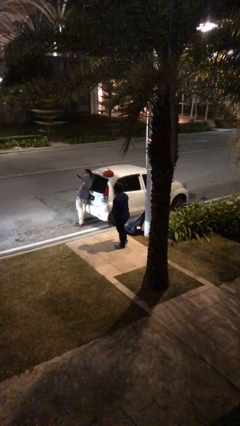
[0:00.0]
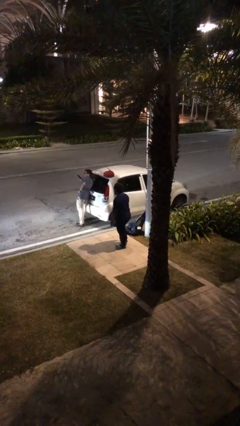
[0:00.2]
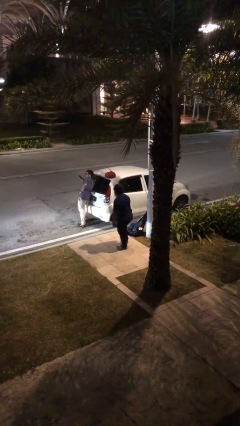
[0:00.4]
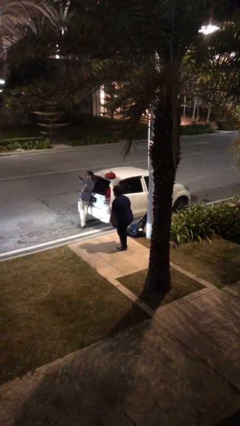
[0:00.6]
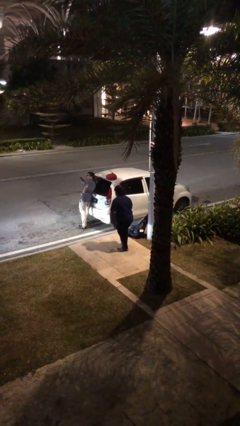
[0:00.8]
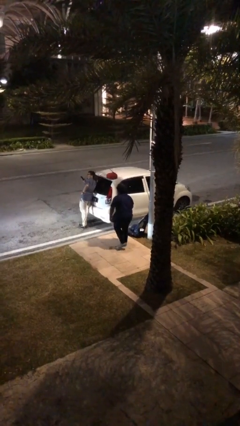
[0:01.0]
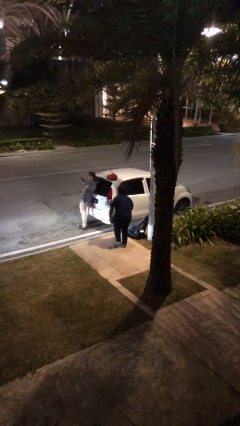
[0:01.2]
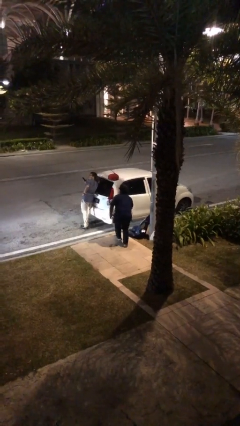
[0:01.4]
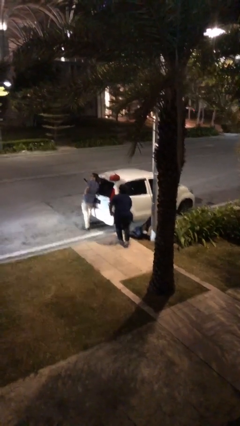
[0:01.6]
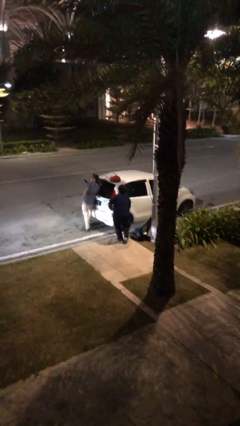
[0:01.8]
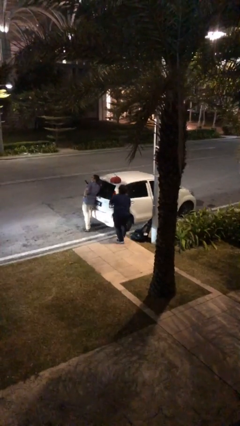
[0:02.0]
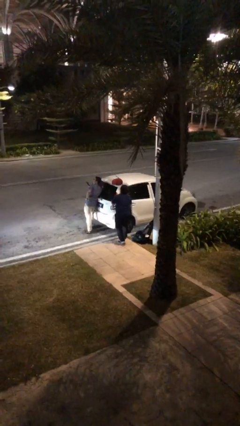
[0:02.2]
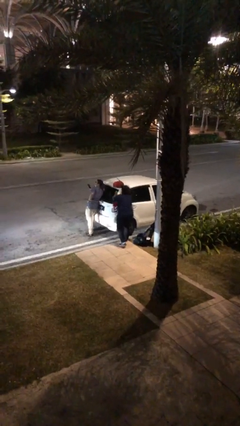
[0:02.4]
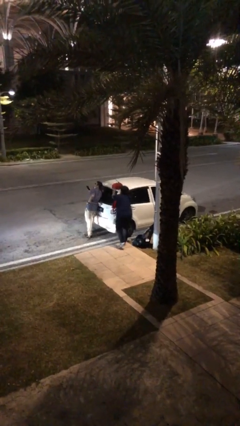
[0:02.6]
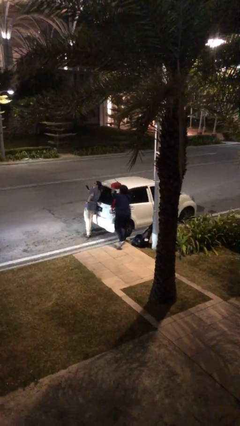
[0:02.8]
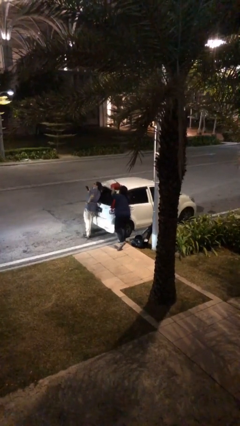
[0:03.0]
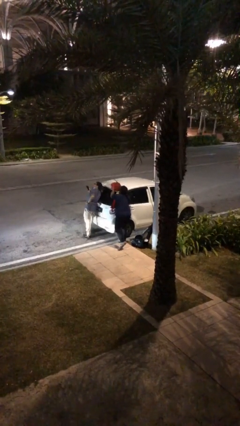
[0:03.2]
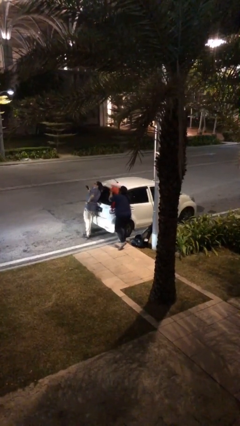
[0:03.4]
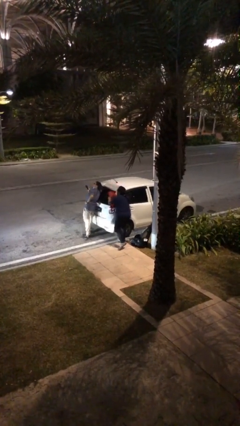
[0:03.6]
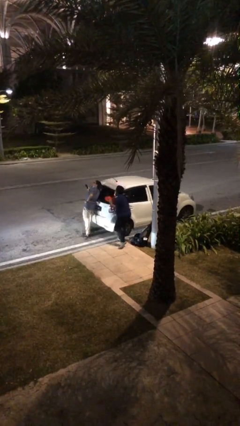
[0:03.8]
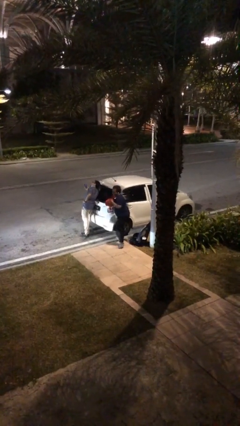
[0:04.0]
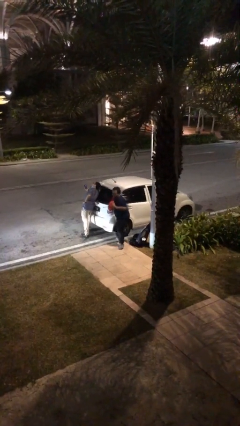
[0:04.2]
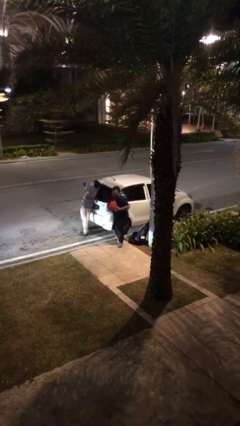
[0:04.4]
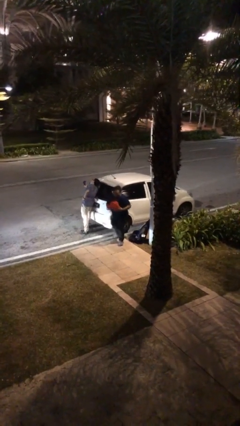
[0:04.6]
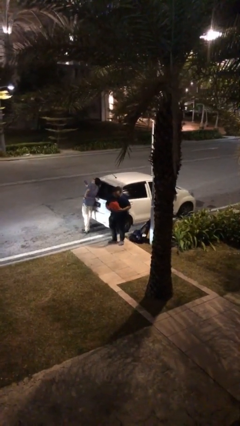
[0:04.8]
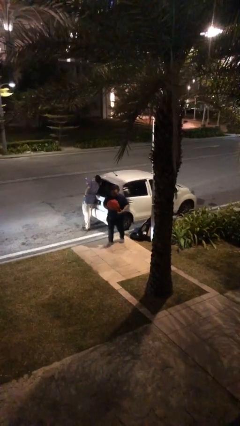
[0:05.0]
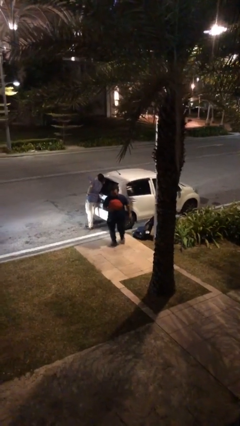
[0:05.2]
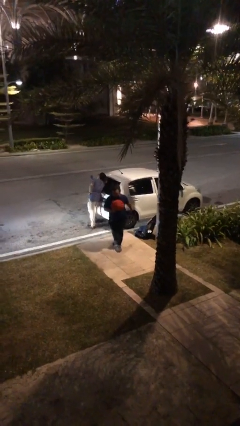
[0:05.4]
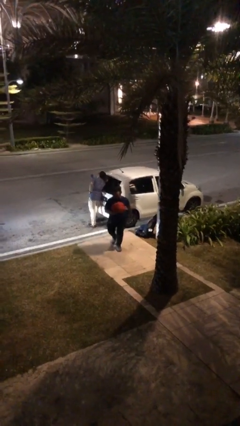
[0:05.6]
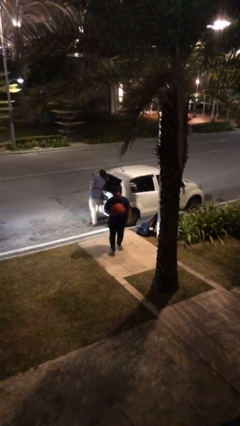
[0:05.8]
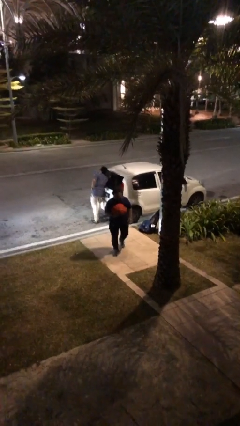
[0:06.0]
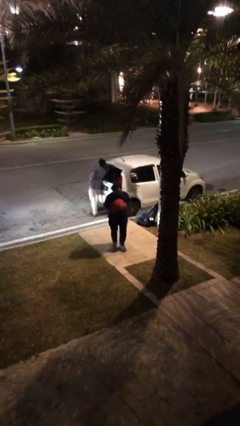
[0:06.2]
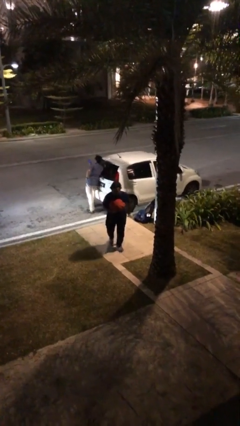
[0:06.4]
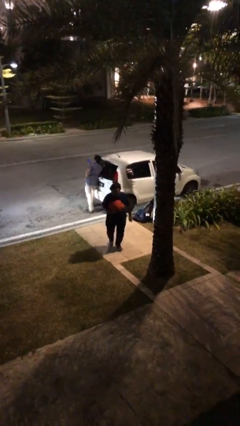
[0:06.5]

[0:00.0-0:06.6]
person steals object from person

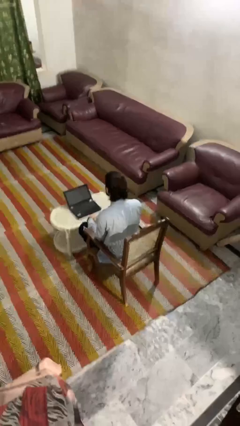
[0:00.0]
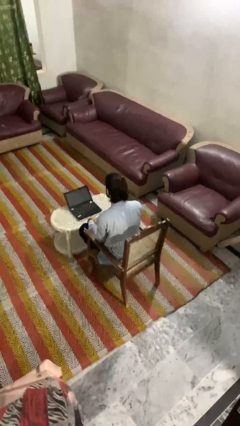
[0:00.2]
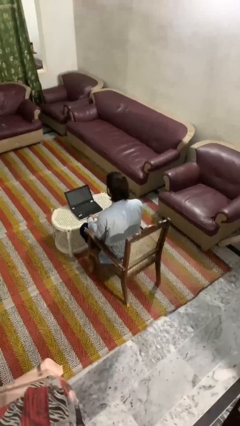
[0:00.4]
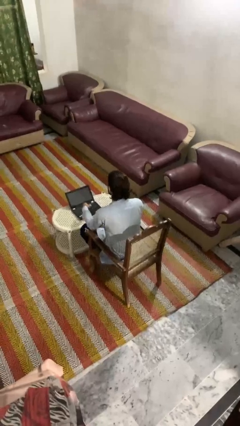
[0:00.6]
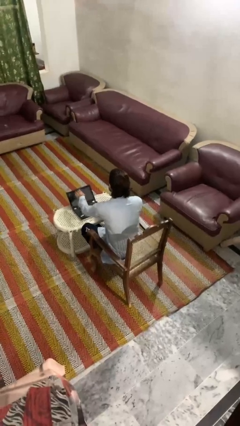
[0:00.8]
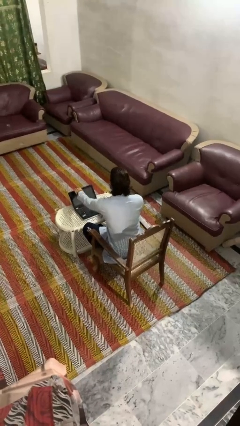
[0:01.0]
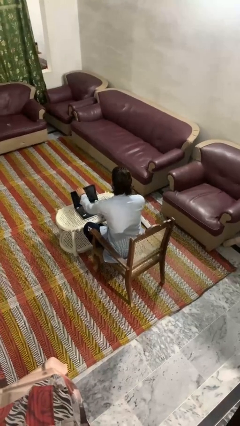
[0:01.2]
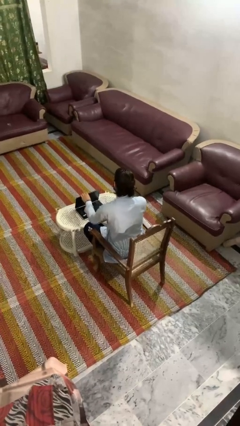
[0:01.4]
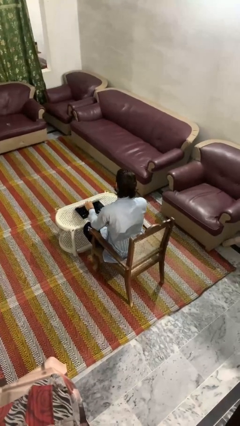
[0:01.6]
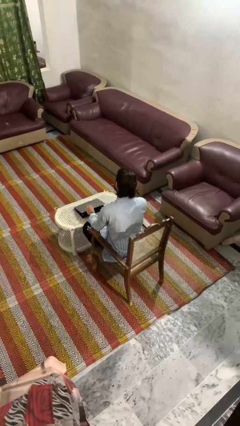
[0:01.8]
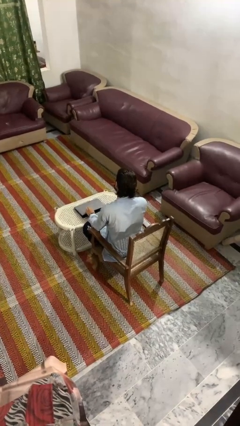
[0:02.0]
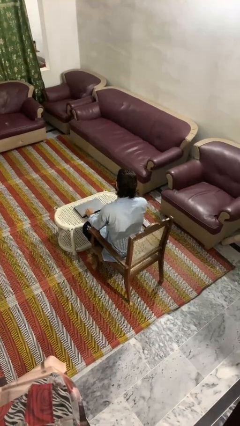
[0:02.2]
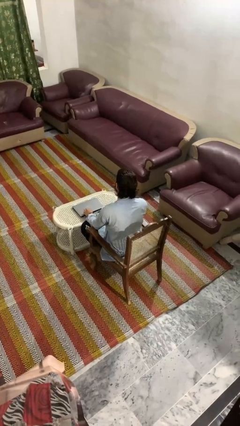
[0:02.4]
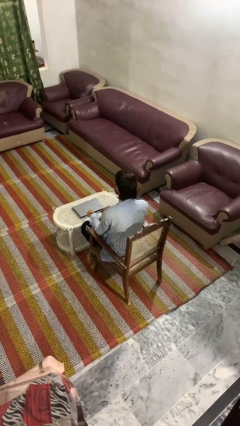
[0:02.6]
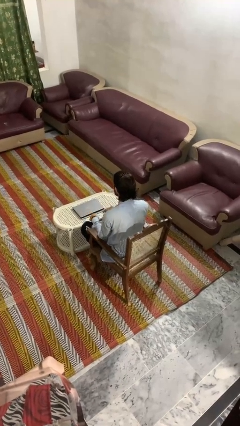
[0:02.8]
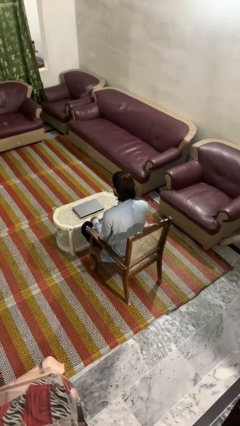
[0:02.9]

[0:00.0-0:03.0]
person closes laptop

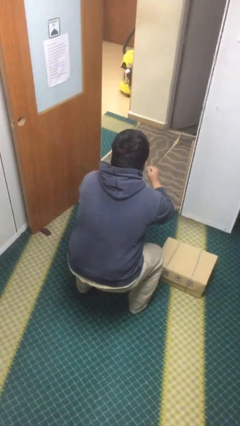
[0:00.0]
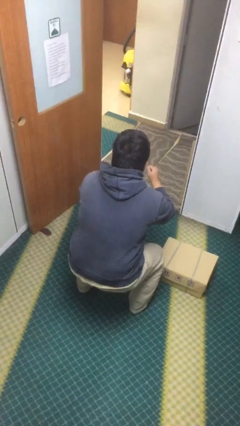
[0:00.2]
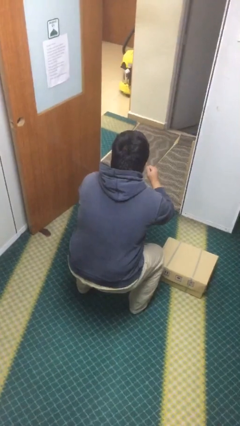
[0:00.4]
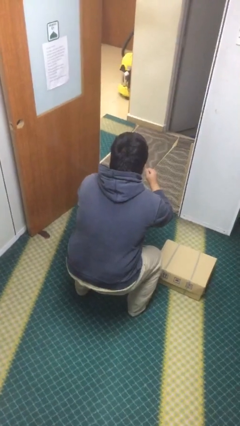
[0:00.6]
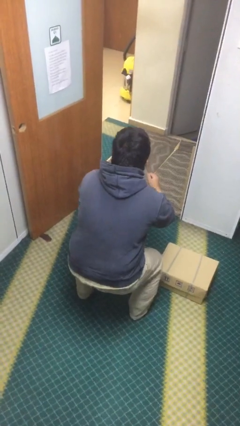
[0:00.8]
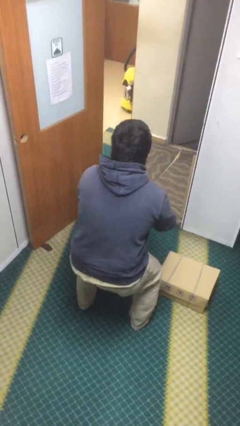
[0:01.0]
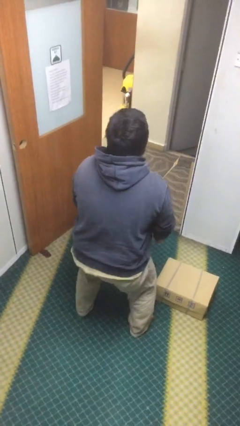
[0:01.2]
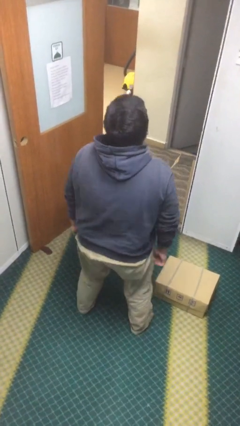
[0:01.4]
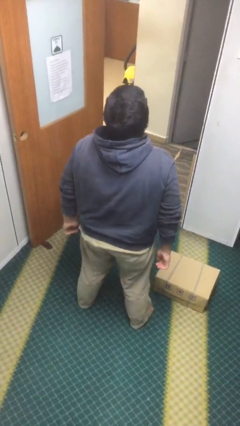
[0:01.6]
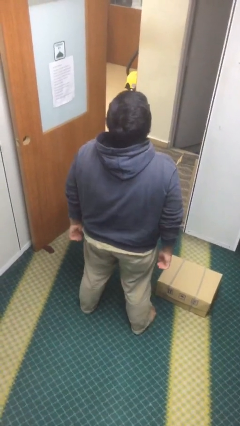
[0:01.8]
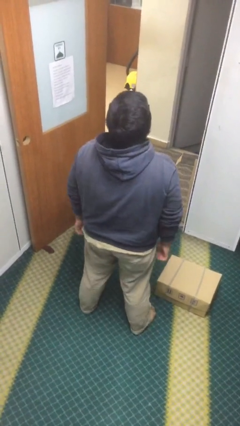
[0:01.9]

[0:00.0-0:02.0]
person stands up

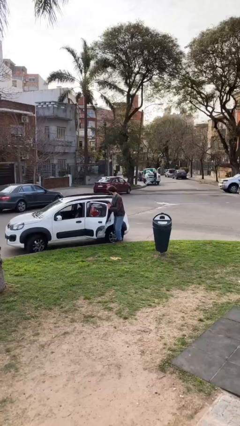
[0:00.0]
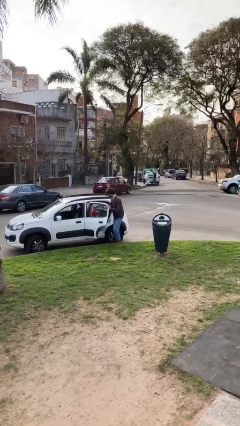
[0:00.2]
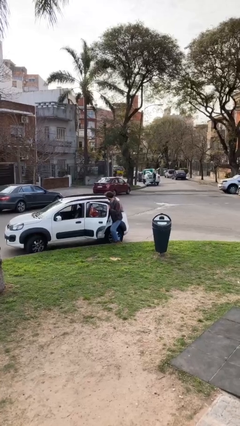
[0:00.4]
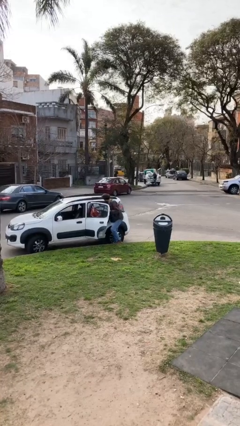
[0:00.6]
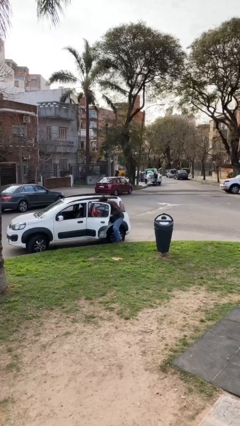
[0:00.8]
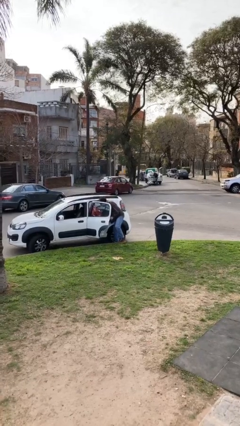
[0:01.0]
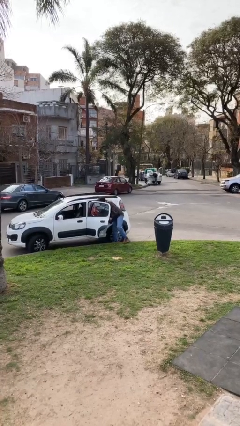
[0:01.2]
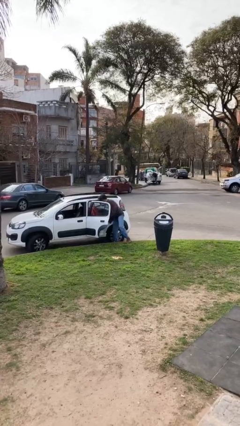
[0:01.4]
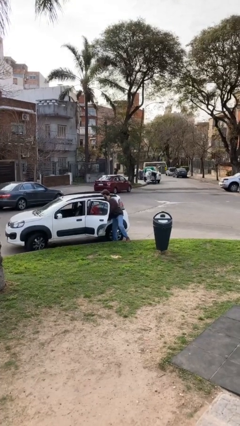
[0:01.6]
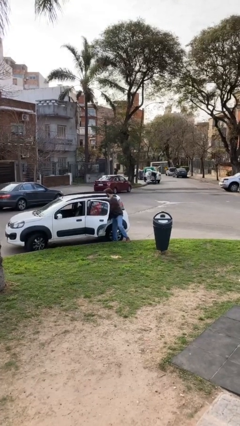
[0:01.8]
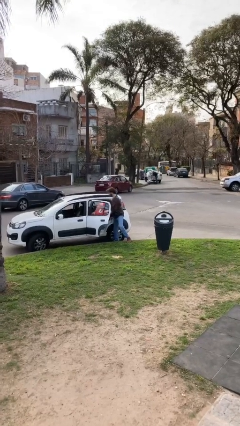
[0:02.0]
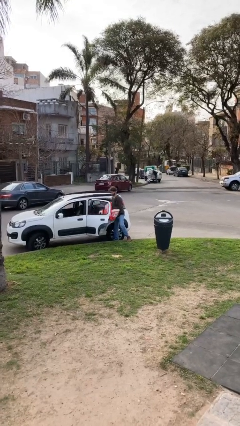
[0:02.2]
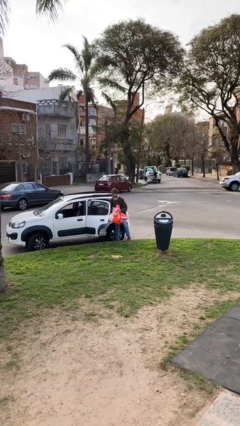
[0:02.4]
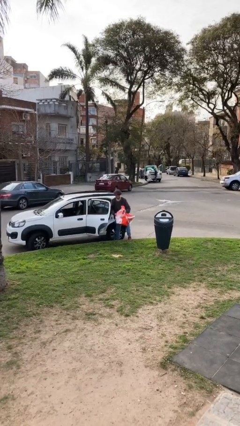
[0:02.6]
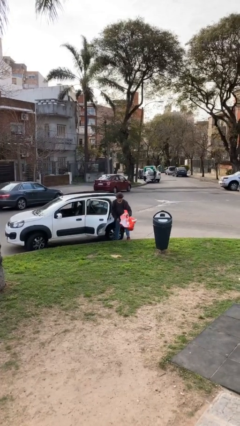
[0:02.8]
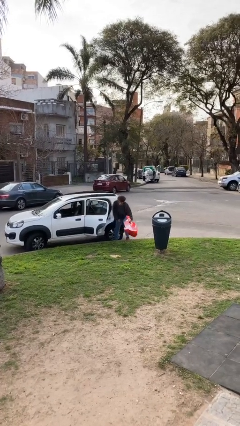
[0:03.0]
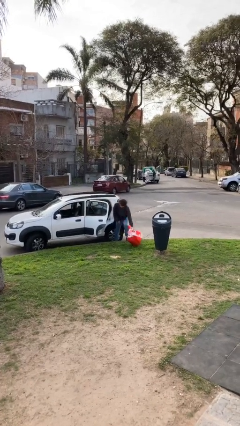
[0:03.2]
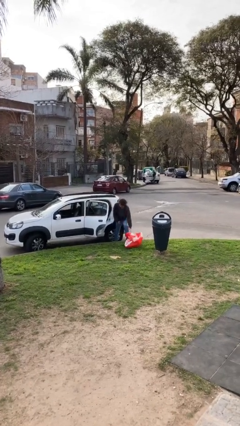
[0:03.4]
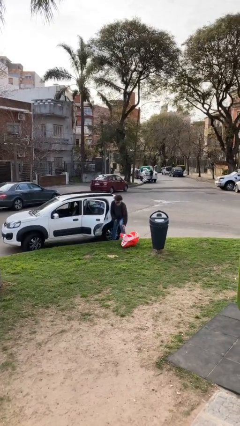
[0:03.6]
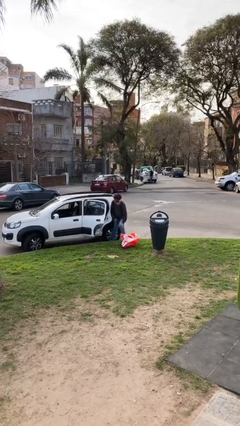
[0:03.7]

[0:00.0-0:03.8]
person unloads car

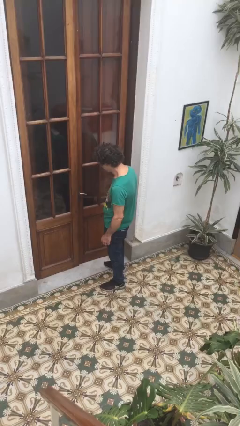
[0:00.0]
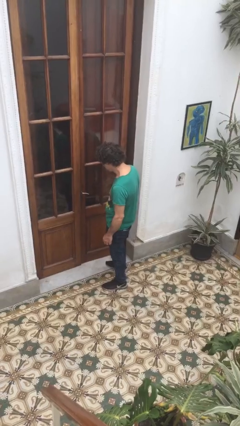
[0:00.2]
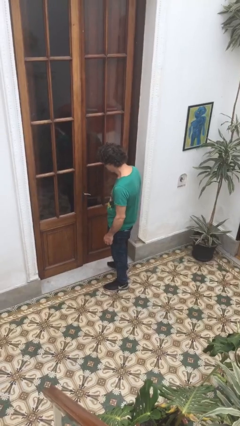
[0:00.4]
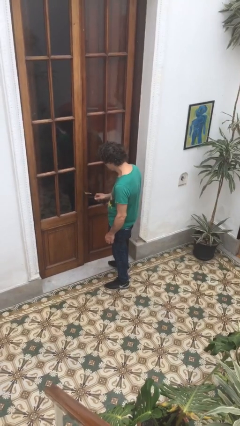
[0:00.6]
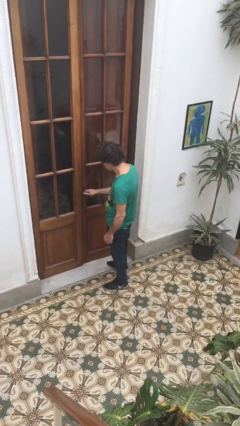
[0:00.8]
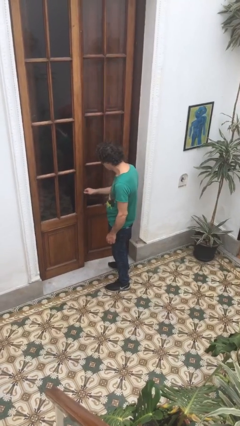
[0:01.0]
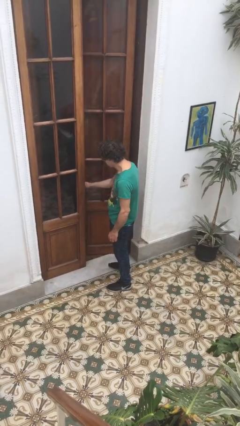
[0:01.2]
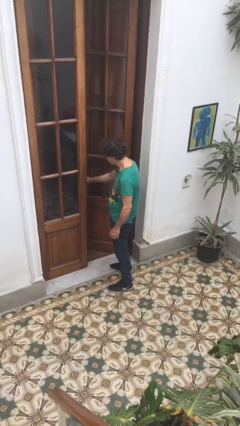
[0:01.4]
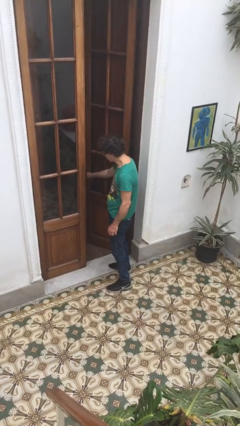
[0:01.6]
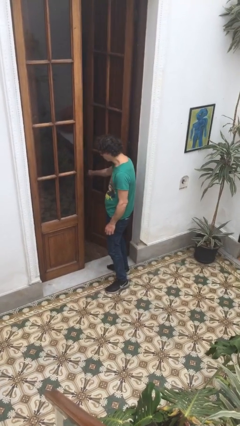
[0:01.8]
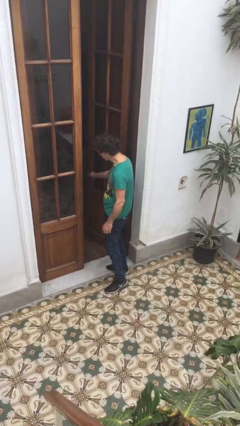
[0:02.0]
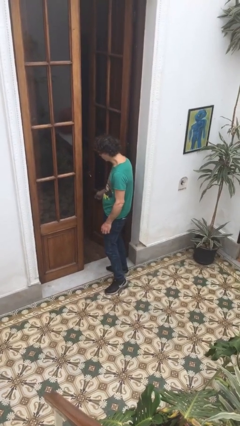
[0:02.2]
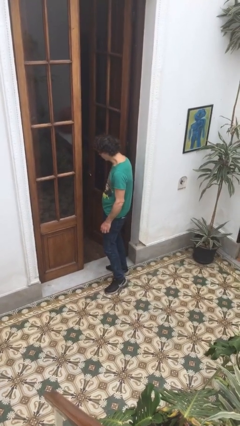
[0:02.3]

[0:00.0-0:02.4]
person opens facility door

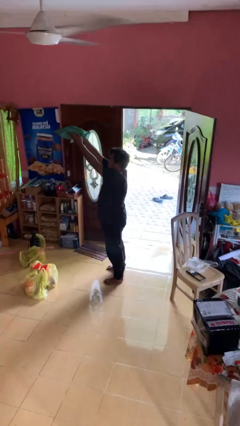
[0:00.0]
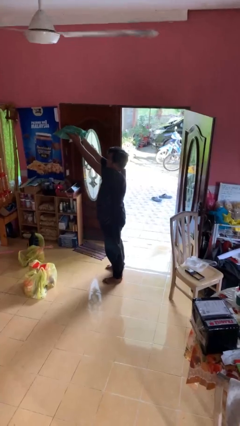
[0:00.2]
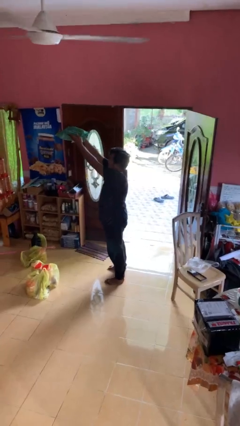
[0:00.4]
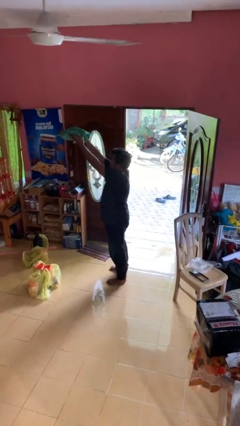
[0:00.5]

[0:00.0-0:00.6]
person catches dropped object
